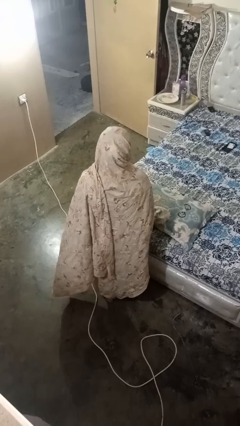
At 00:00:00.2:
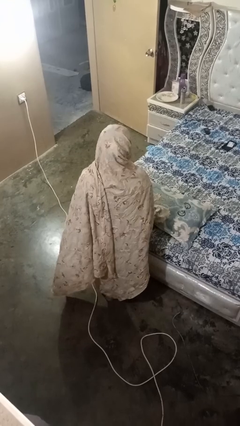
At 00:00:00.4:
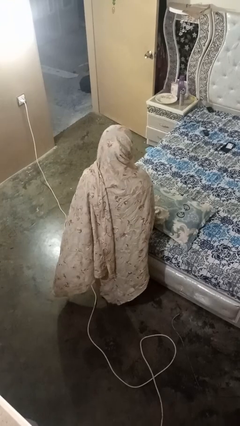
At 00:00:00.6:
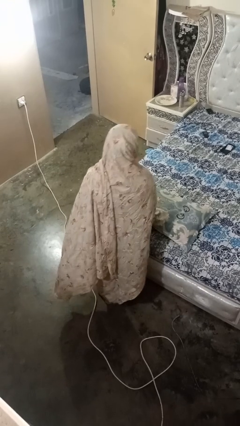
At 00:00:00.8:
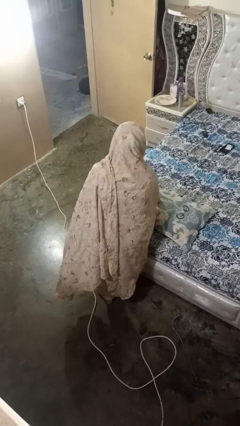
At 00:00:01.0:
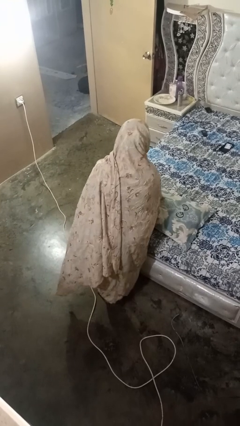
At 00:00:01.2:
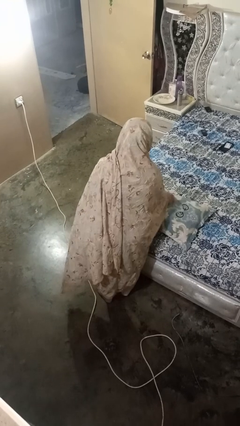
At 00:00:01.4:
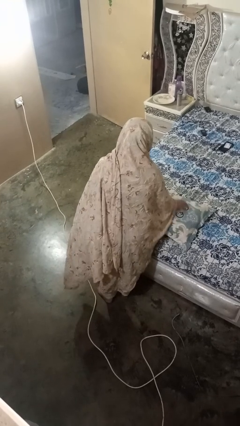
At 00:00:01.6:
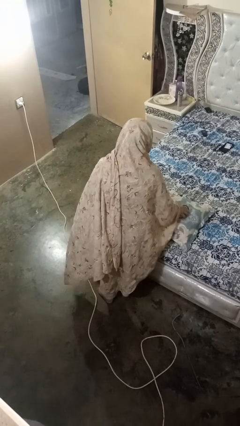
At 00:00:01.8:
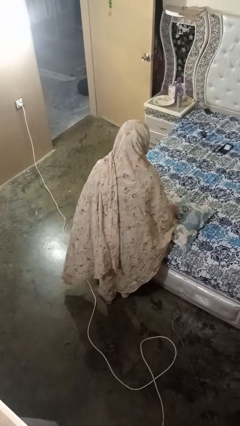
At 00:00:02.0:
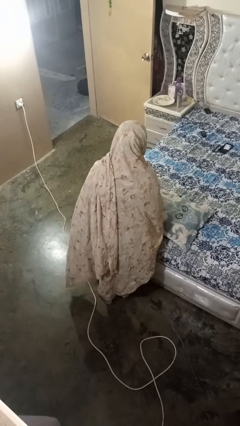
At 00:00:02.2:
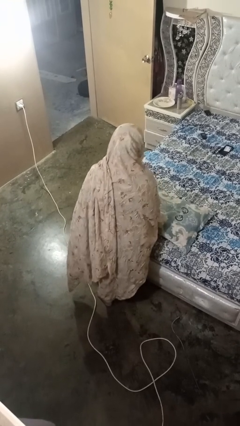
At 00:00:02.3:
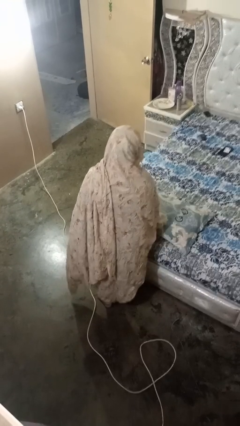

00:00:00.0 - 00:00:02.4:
person taps object with finger

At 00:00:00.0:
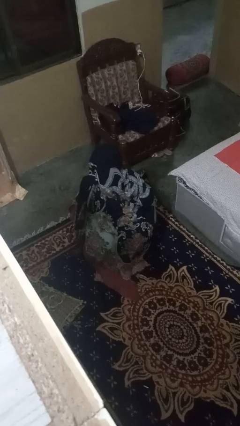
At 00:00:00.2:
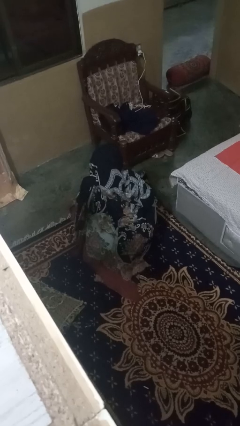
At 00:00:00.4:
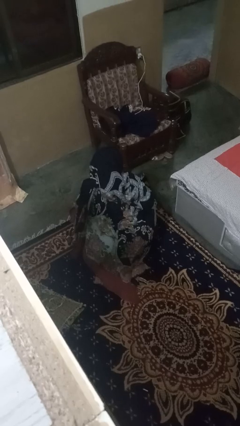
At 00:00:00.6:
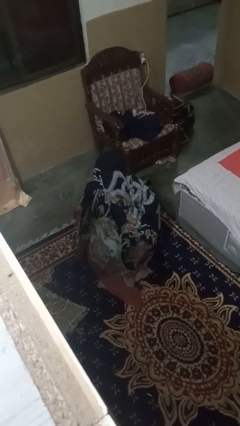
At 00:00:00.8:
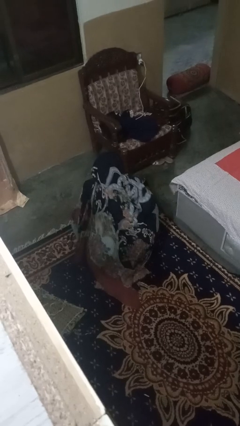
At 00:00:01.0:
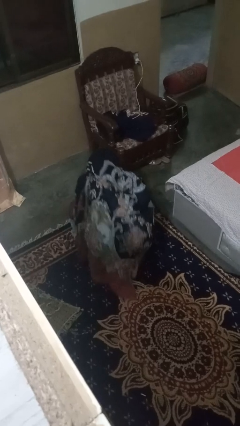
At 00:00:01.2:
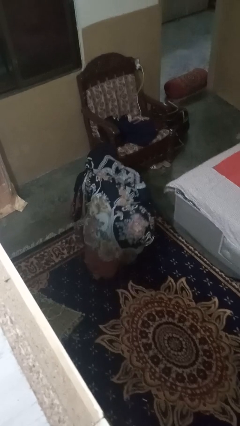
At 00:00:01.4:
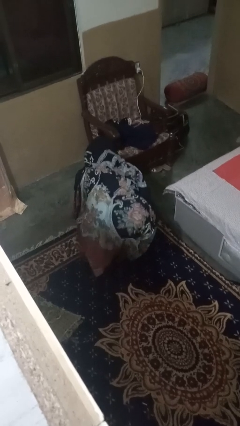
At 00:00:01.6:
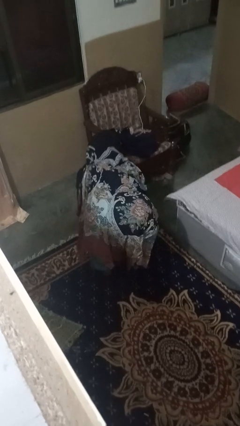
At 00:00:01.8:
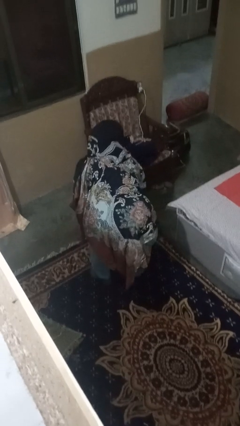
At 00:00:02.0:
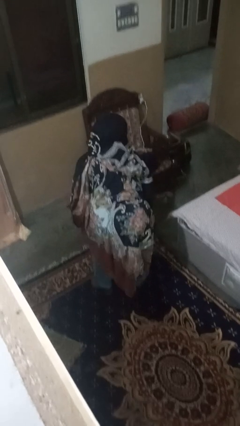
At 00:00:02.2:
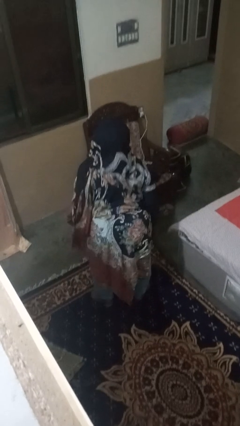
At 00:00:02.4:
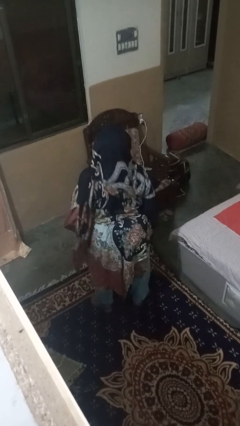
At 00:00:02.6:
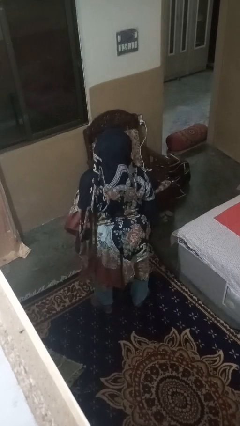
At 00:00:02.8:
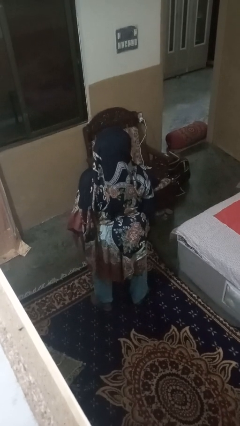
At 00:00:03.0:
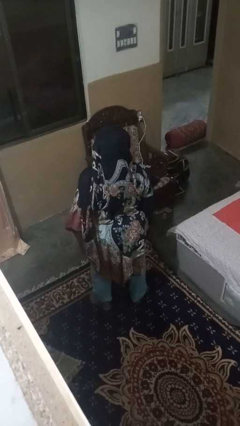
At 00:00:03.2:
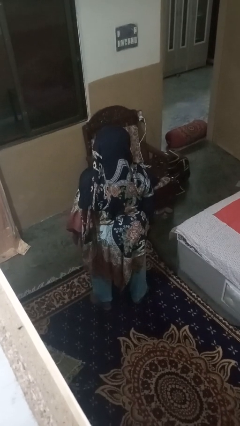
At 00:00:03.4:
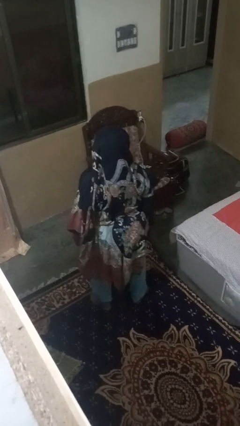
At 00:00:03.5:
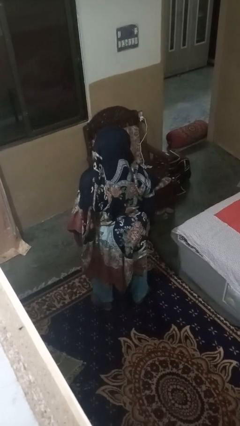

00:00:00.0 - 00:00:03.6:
person stands up

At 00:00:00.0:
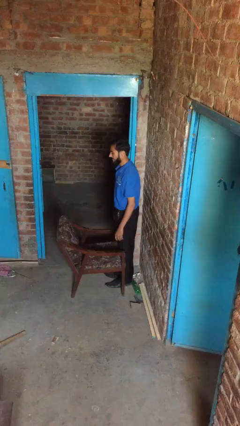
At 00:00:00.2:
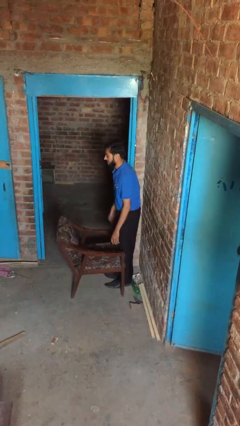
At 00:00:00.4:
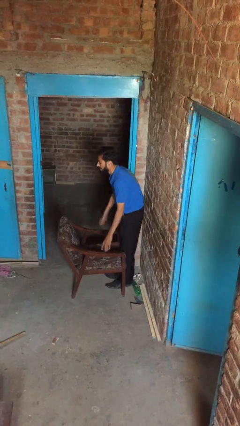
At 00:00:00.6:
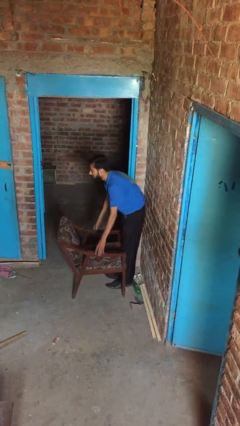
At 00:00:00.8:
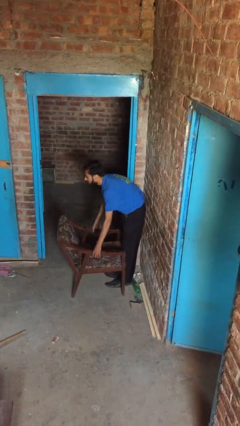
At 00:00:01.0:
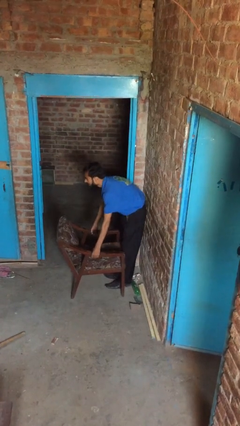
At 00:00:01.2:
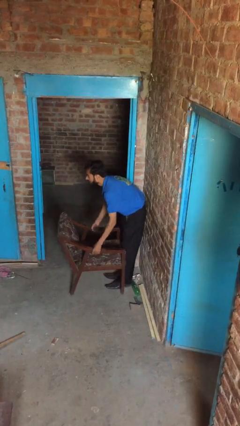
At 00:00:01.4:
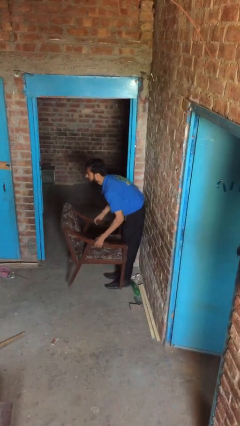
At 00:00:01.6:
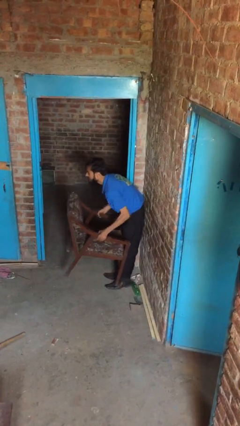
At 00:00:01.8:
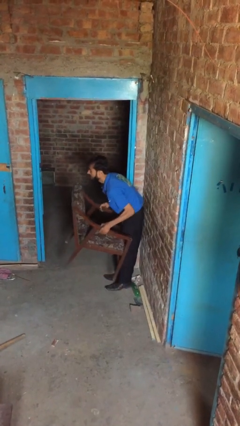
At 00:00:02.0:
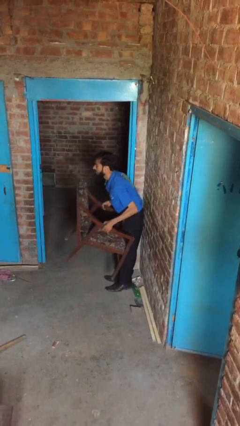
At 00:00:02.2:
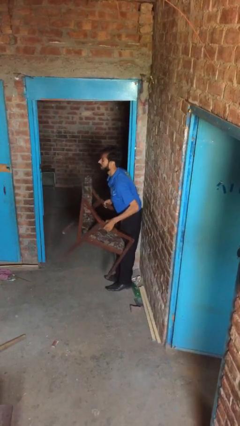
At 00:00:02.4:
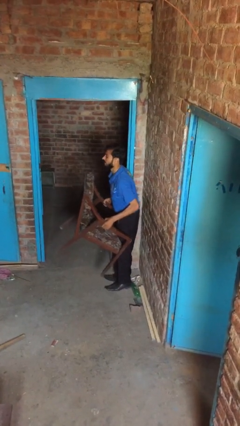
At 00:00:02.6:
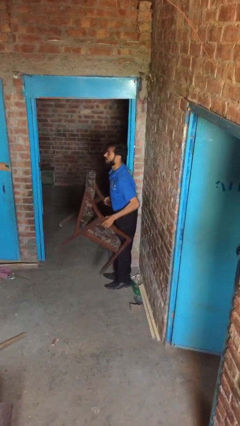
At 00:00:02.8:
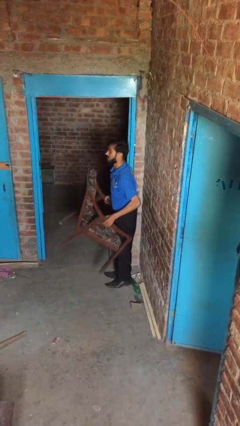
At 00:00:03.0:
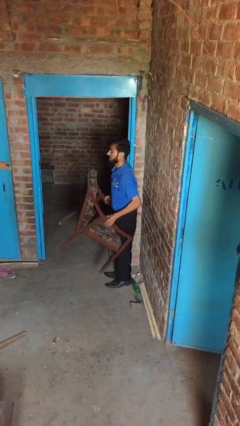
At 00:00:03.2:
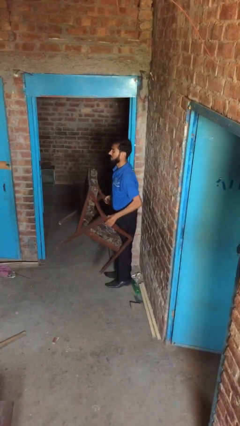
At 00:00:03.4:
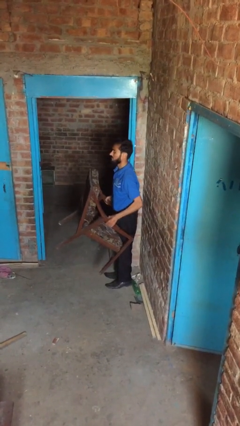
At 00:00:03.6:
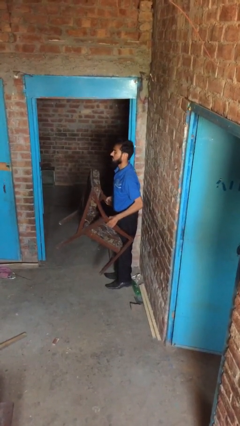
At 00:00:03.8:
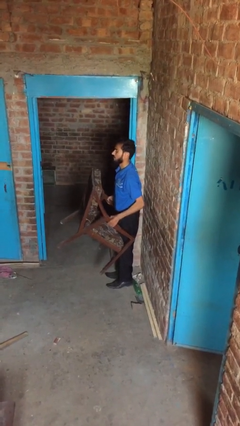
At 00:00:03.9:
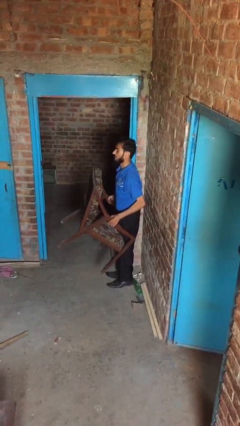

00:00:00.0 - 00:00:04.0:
person picks up object from floor

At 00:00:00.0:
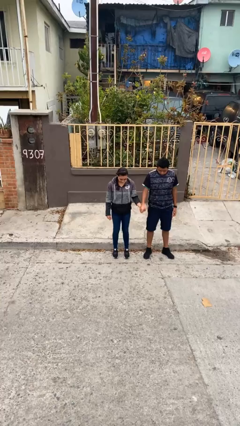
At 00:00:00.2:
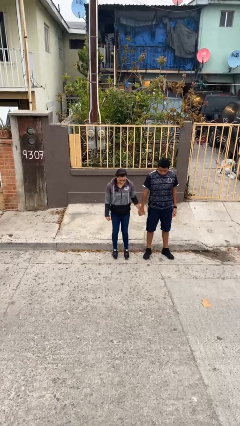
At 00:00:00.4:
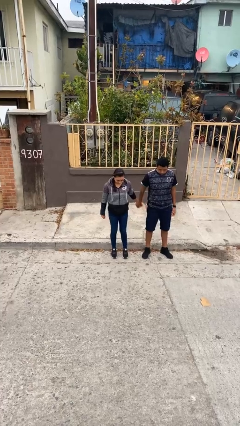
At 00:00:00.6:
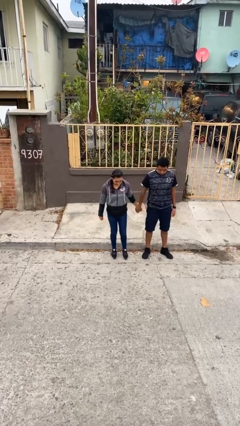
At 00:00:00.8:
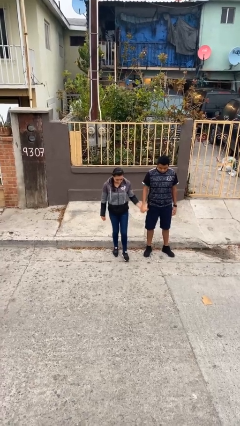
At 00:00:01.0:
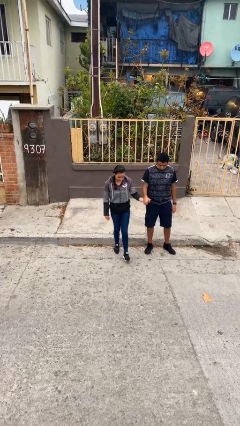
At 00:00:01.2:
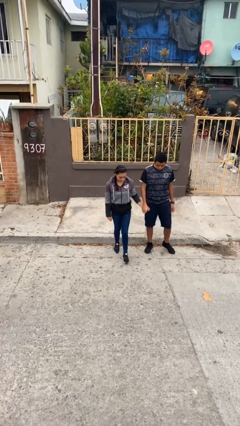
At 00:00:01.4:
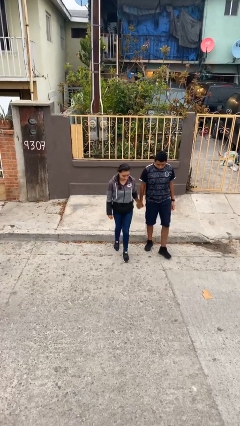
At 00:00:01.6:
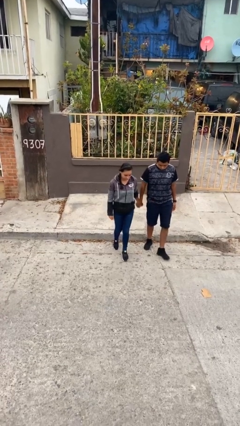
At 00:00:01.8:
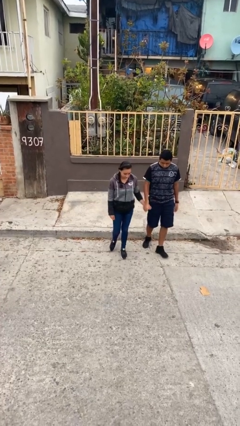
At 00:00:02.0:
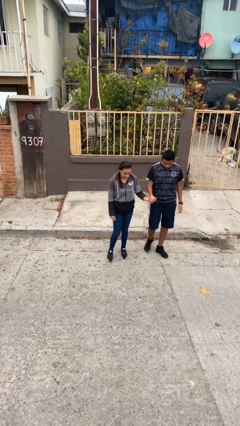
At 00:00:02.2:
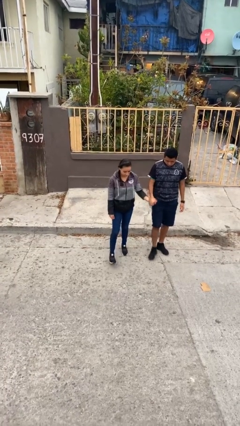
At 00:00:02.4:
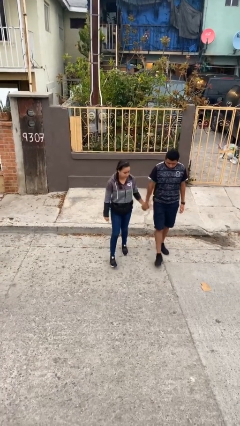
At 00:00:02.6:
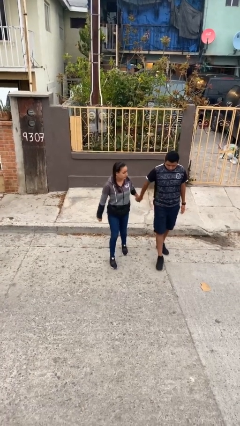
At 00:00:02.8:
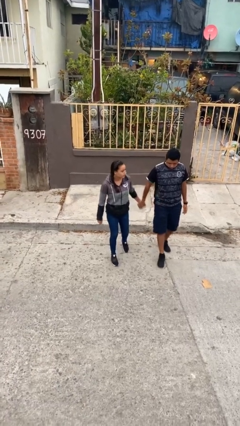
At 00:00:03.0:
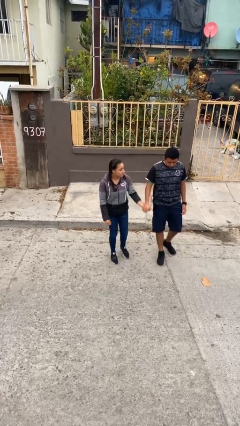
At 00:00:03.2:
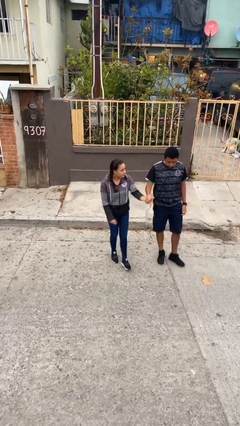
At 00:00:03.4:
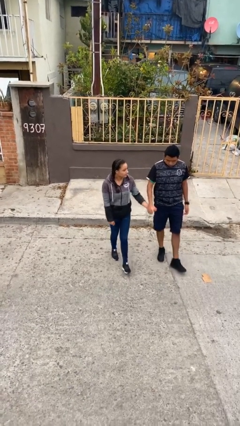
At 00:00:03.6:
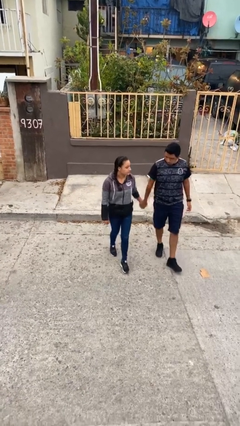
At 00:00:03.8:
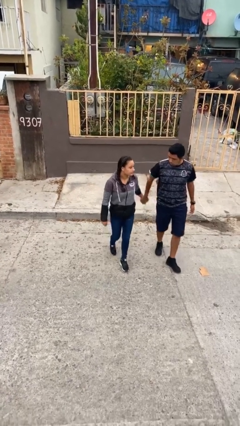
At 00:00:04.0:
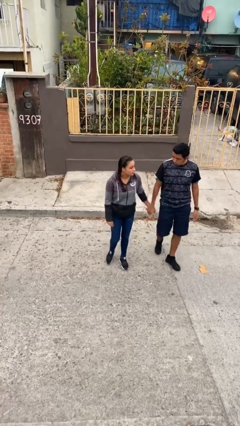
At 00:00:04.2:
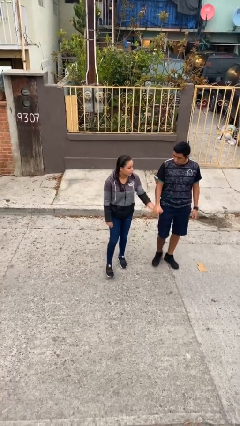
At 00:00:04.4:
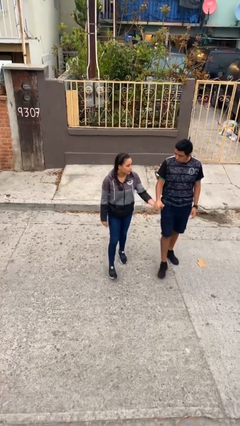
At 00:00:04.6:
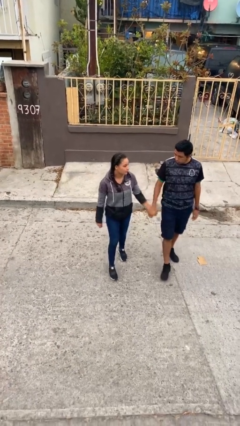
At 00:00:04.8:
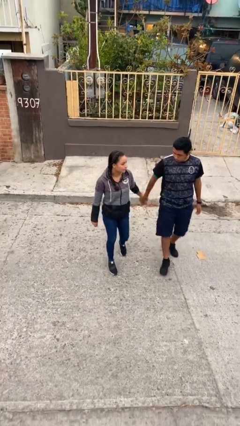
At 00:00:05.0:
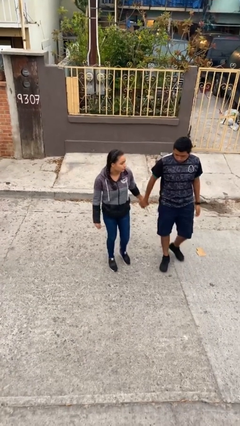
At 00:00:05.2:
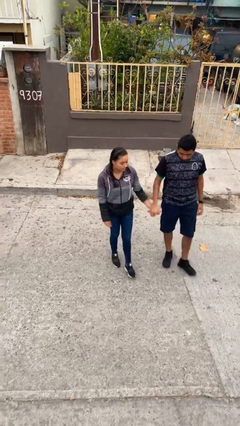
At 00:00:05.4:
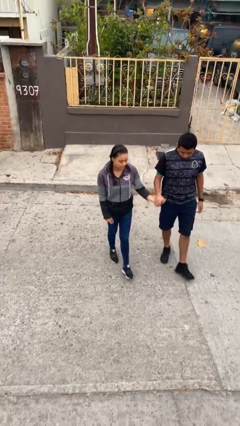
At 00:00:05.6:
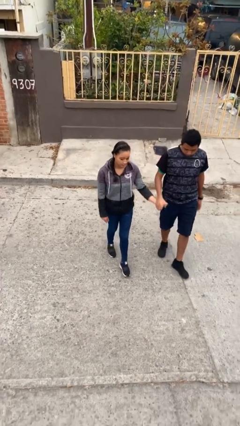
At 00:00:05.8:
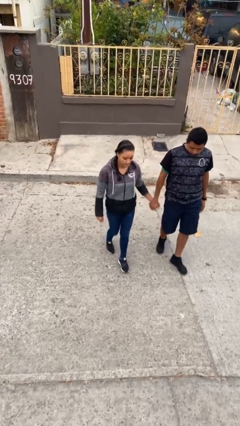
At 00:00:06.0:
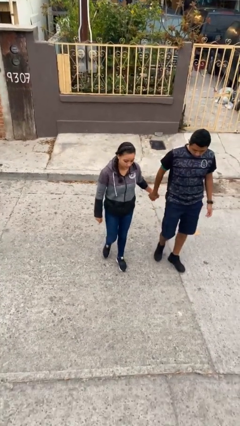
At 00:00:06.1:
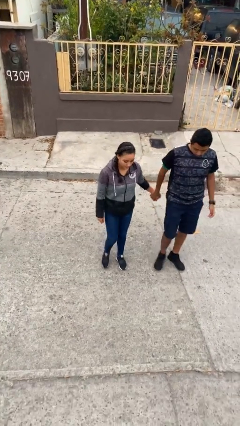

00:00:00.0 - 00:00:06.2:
person holds hand

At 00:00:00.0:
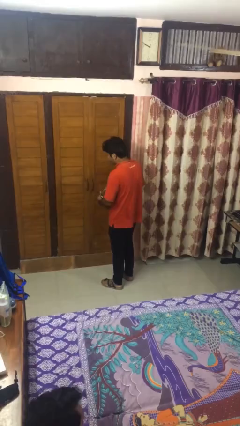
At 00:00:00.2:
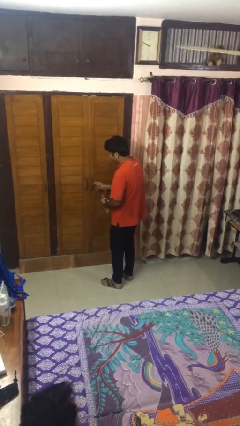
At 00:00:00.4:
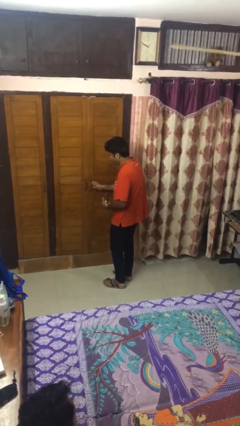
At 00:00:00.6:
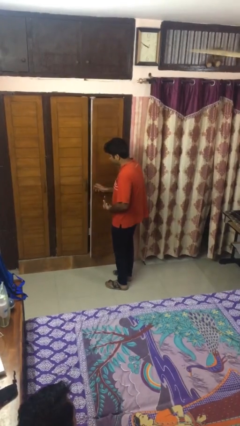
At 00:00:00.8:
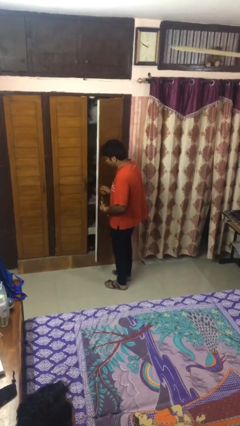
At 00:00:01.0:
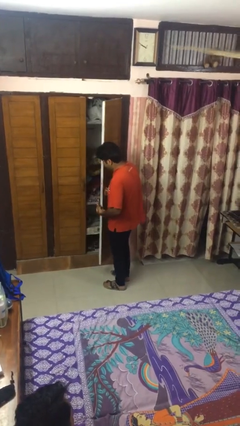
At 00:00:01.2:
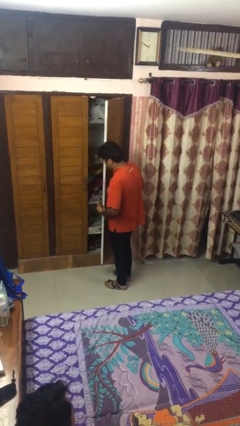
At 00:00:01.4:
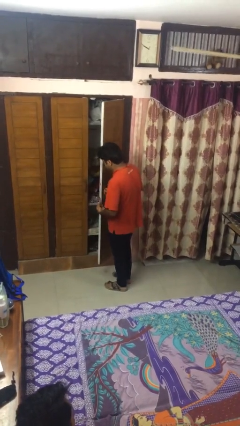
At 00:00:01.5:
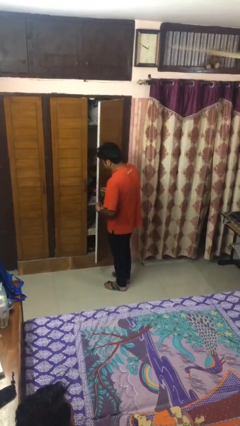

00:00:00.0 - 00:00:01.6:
person opens facility door
